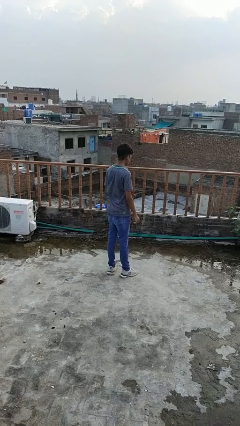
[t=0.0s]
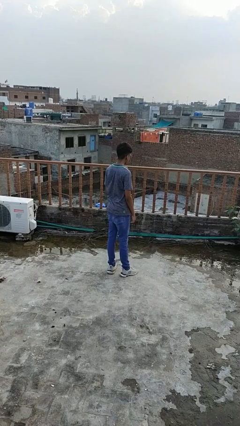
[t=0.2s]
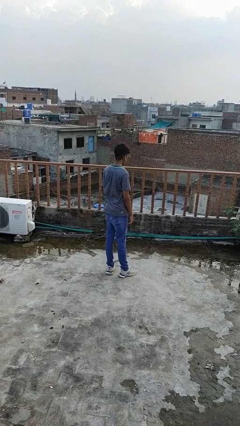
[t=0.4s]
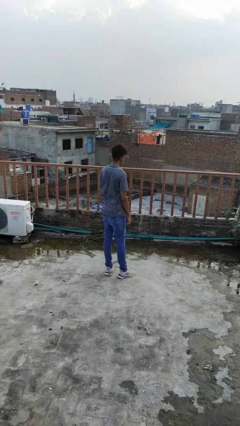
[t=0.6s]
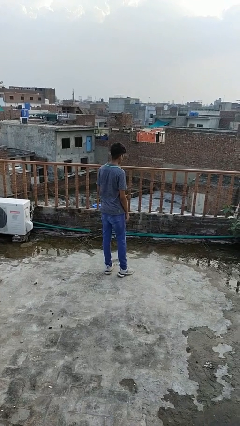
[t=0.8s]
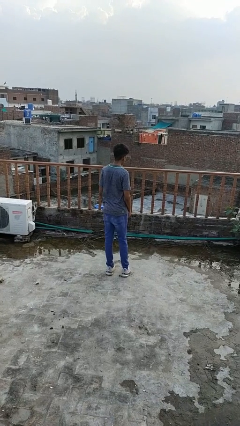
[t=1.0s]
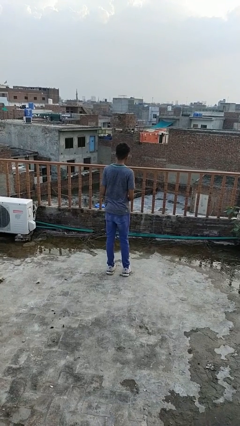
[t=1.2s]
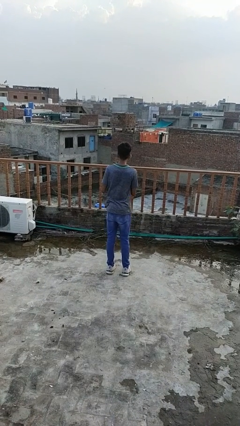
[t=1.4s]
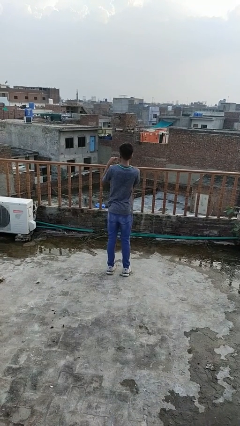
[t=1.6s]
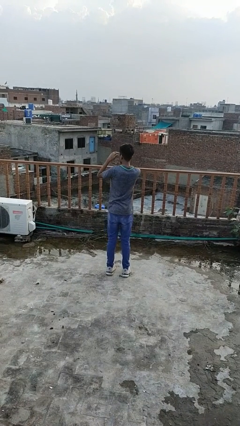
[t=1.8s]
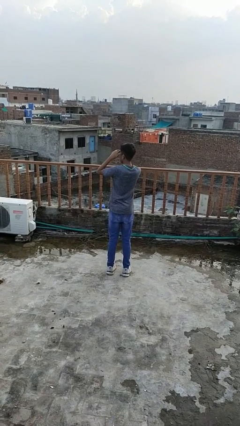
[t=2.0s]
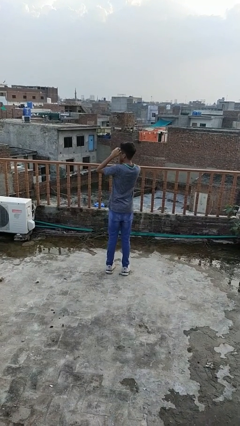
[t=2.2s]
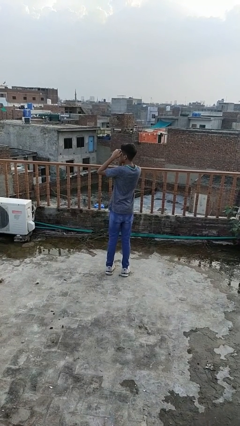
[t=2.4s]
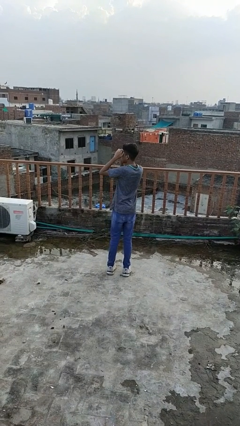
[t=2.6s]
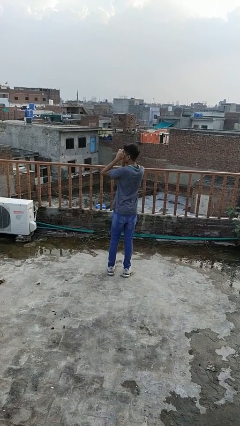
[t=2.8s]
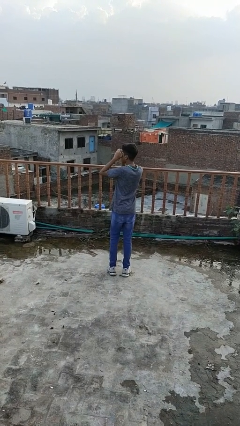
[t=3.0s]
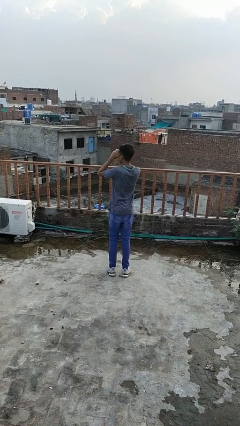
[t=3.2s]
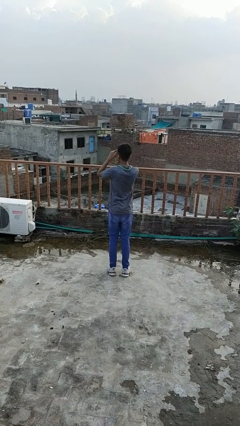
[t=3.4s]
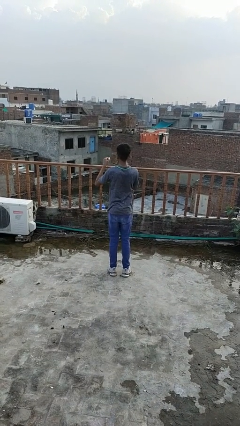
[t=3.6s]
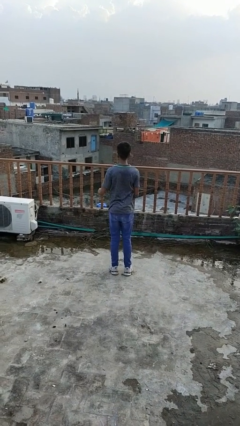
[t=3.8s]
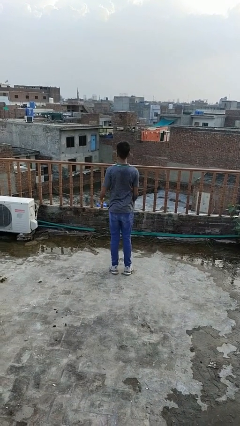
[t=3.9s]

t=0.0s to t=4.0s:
person shades eyes

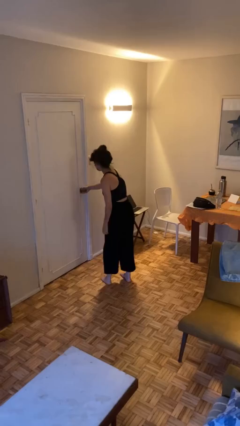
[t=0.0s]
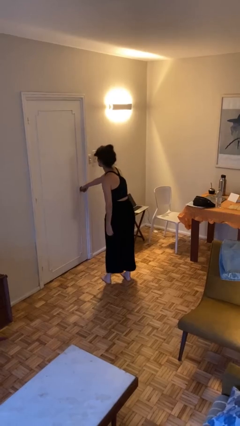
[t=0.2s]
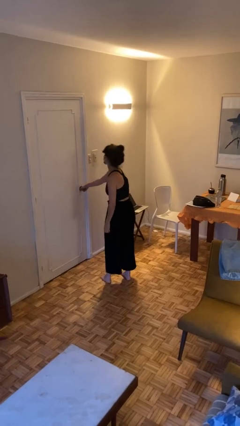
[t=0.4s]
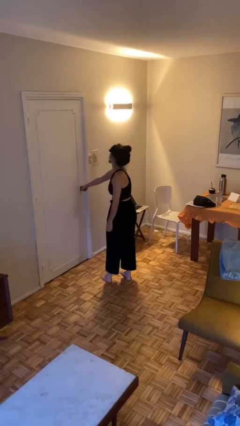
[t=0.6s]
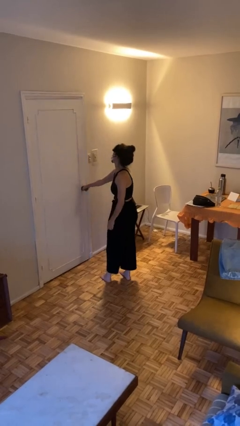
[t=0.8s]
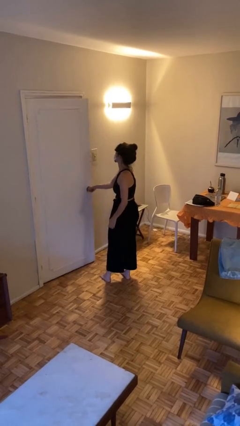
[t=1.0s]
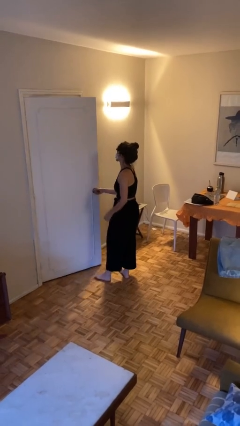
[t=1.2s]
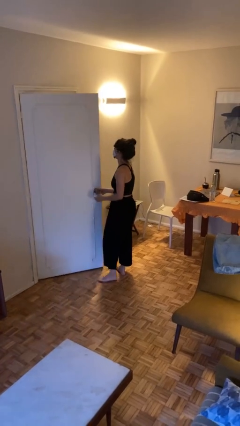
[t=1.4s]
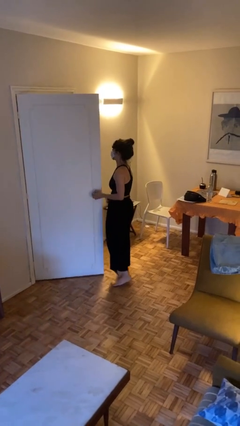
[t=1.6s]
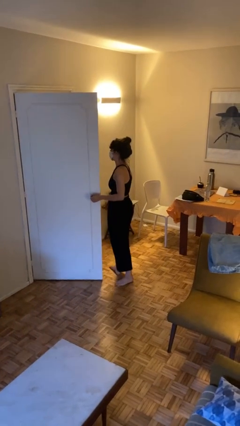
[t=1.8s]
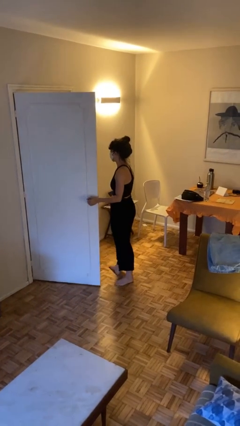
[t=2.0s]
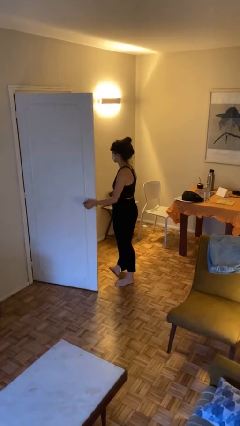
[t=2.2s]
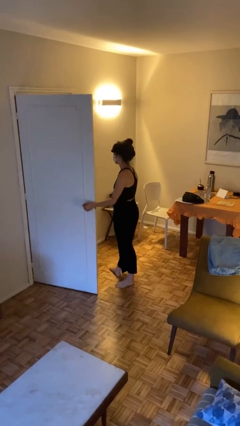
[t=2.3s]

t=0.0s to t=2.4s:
person opens facility door

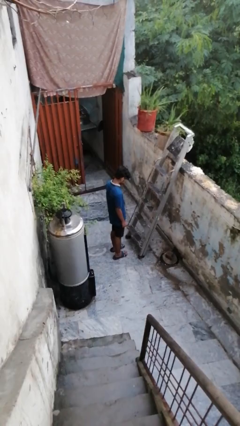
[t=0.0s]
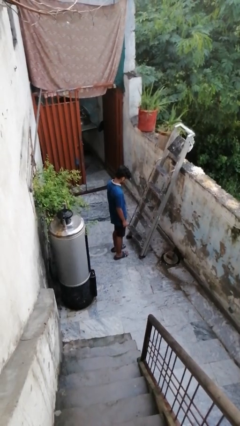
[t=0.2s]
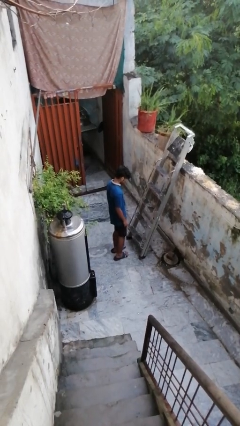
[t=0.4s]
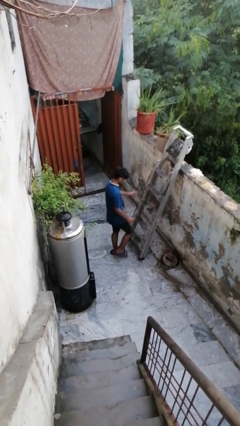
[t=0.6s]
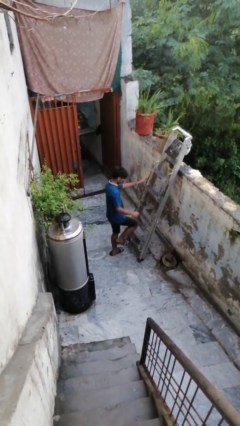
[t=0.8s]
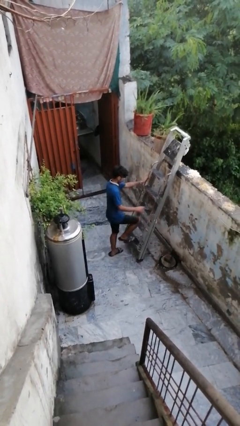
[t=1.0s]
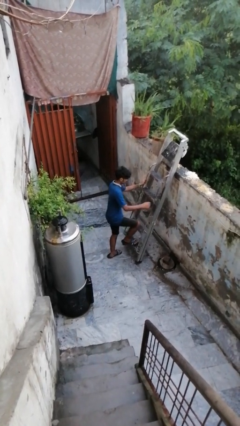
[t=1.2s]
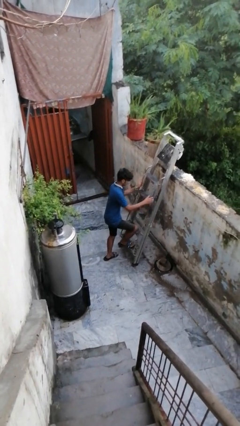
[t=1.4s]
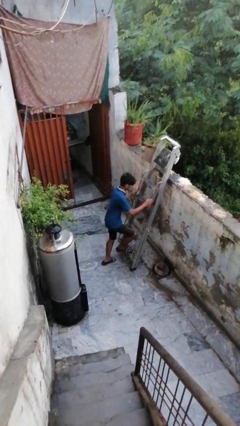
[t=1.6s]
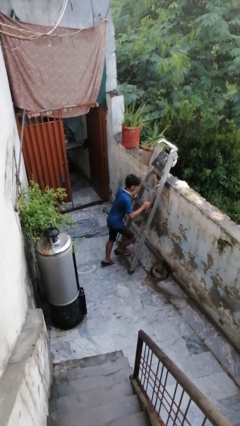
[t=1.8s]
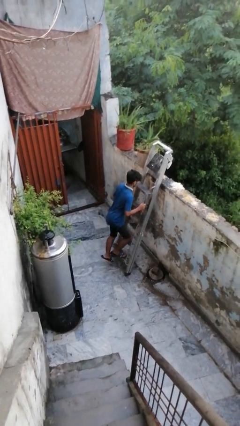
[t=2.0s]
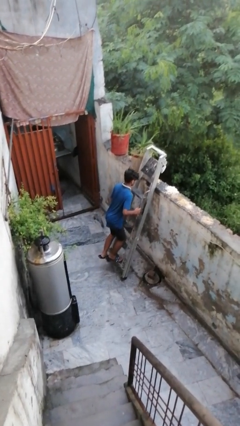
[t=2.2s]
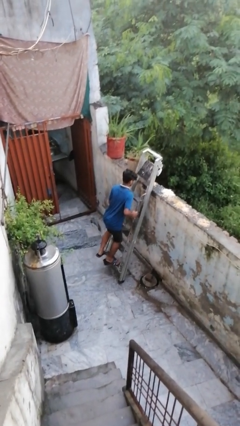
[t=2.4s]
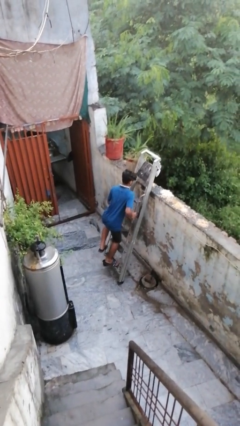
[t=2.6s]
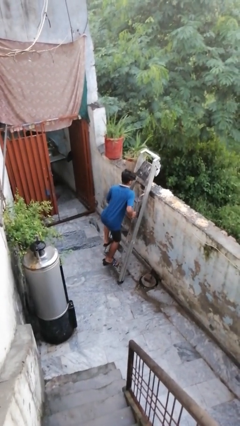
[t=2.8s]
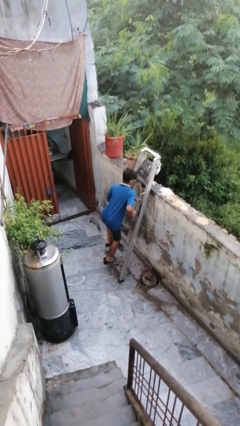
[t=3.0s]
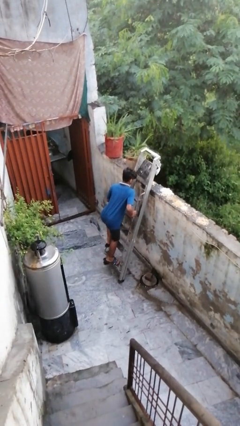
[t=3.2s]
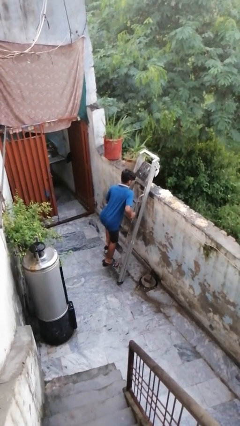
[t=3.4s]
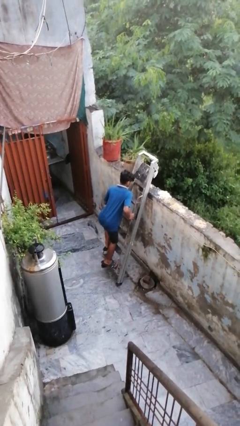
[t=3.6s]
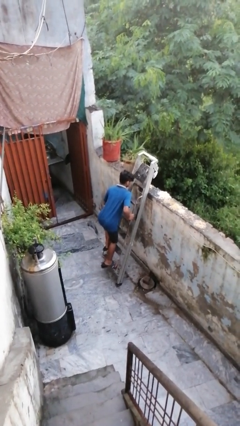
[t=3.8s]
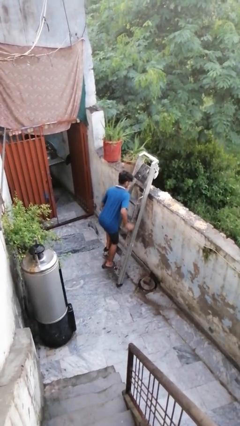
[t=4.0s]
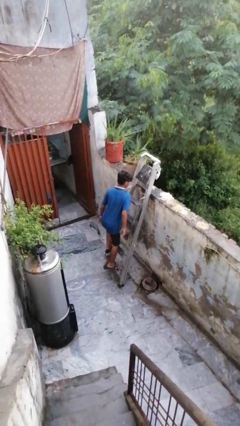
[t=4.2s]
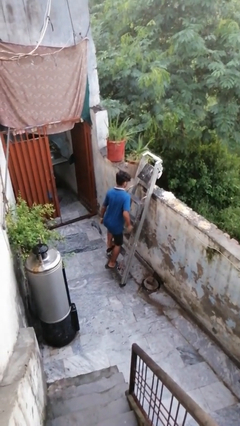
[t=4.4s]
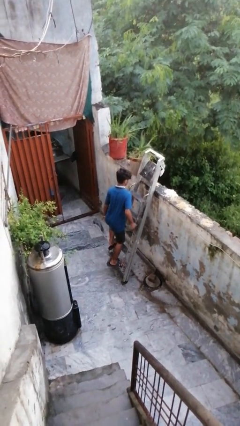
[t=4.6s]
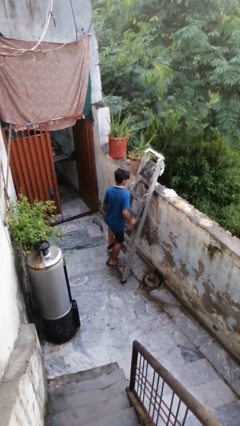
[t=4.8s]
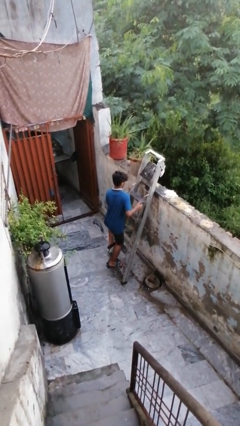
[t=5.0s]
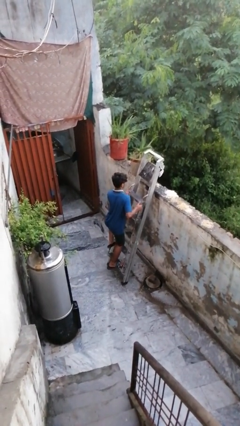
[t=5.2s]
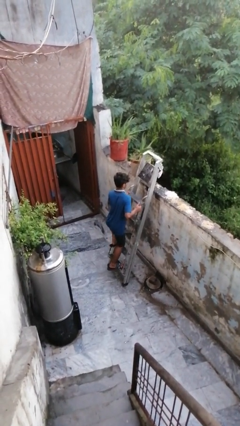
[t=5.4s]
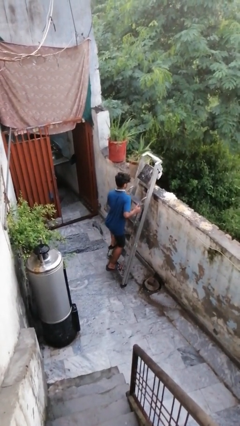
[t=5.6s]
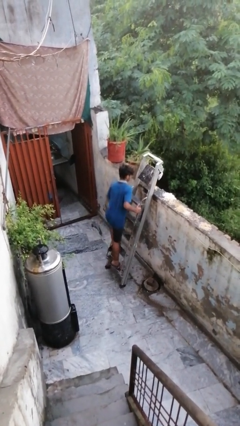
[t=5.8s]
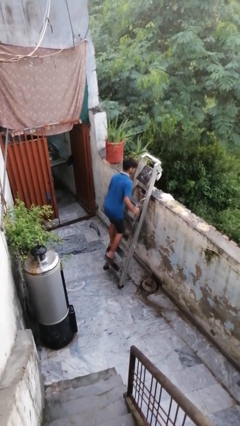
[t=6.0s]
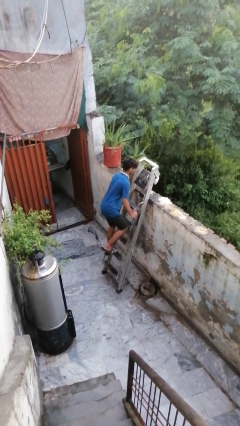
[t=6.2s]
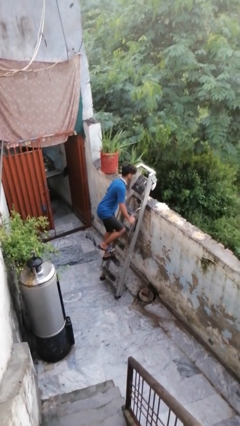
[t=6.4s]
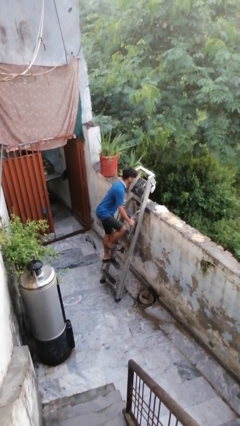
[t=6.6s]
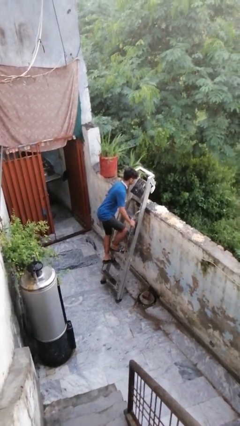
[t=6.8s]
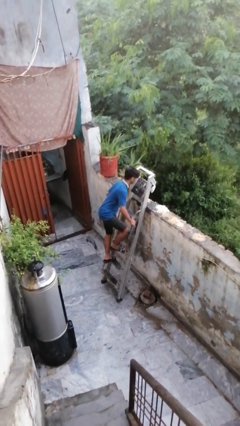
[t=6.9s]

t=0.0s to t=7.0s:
person climbs up ladder

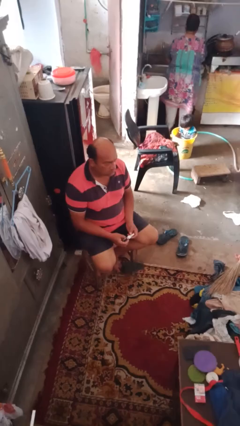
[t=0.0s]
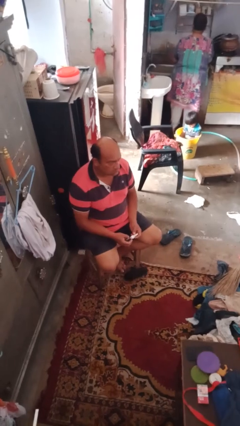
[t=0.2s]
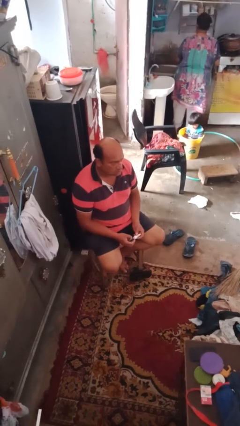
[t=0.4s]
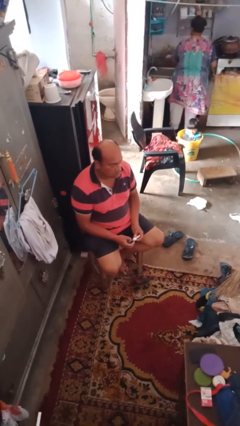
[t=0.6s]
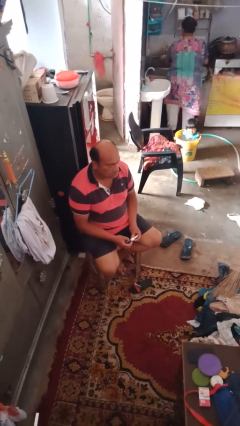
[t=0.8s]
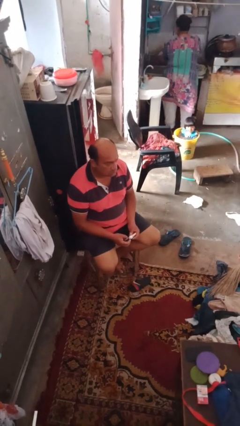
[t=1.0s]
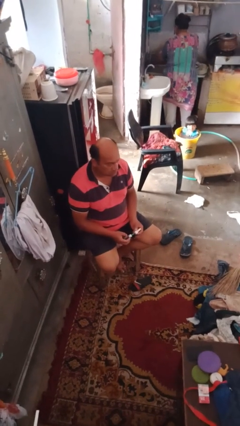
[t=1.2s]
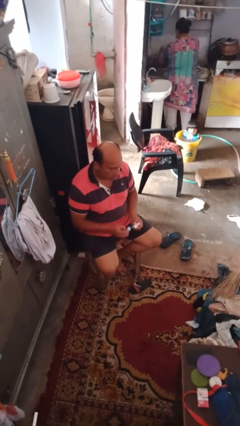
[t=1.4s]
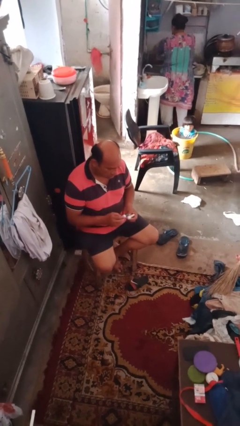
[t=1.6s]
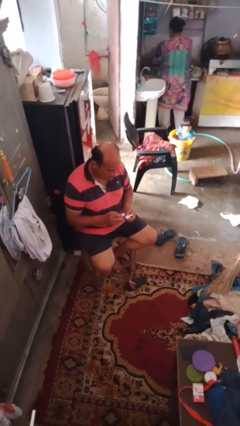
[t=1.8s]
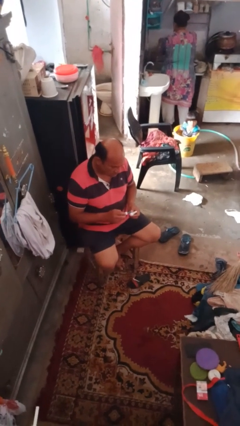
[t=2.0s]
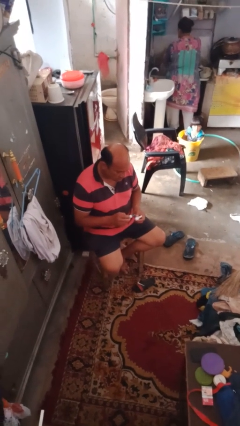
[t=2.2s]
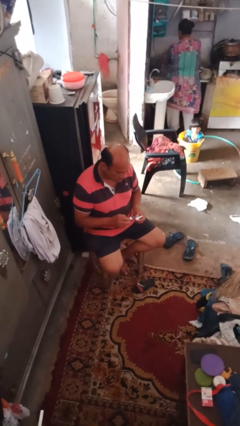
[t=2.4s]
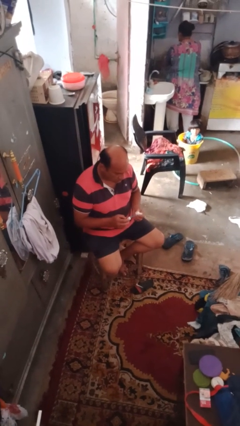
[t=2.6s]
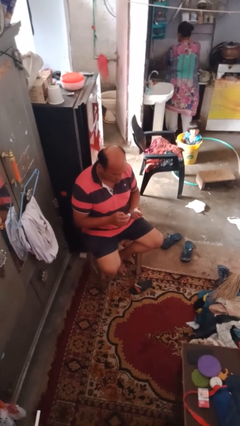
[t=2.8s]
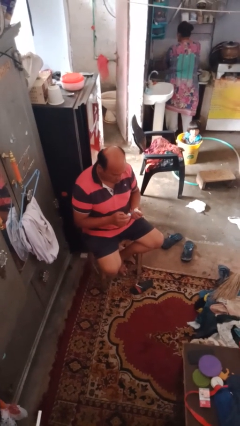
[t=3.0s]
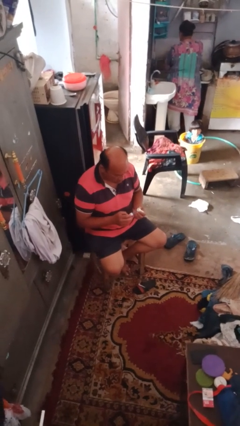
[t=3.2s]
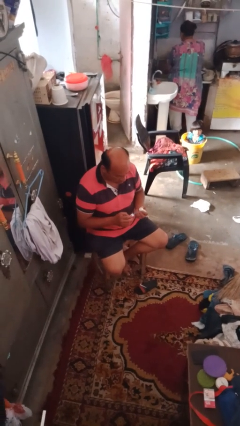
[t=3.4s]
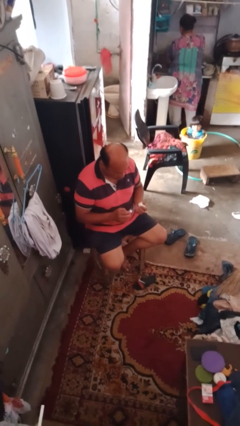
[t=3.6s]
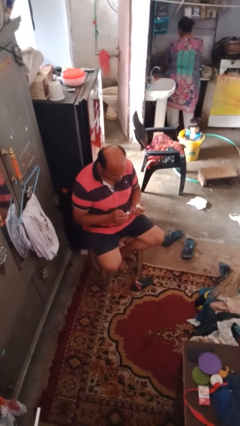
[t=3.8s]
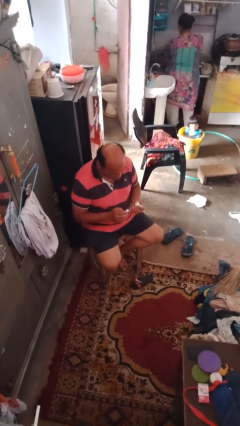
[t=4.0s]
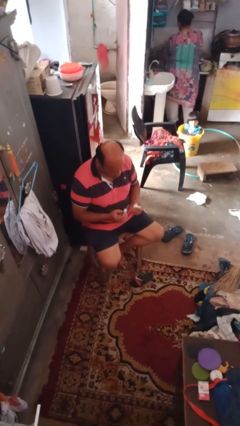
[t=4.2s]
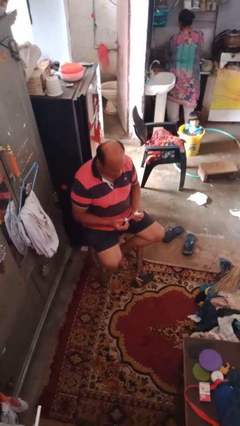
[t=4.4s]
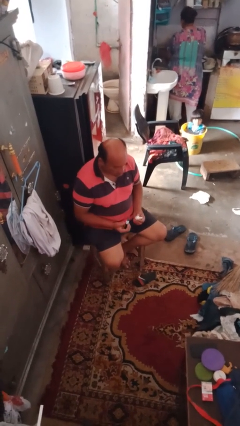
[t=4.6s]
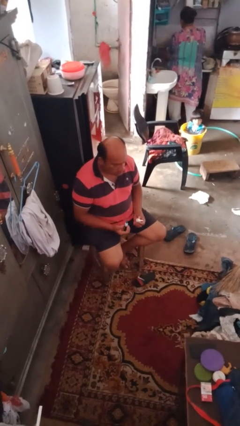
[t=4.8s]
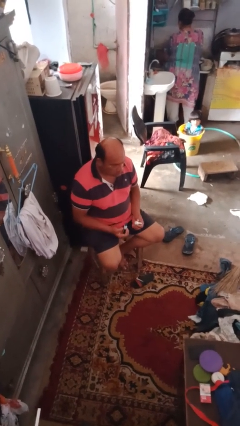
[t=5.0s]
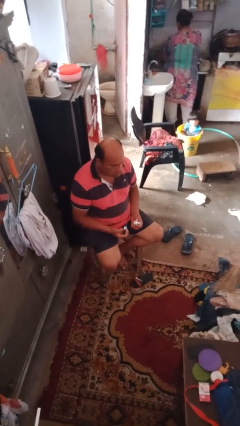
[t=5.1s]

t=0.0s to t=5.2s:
person paints fingernails
